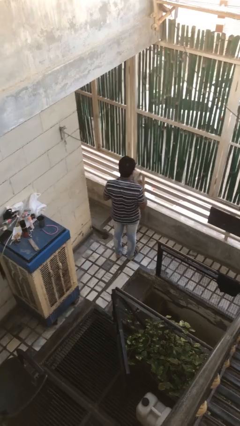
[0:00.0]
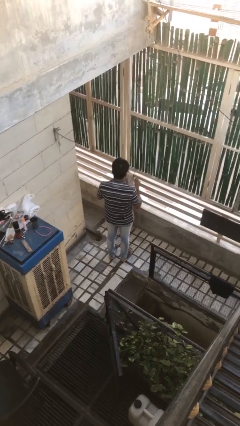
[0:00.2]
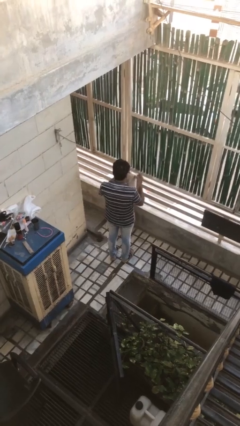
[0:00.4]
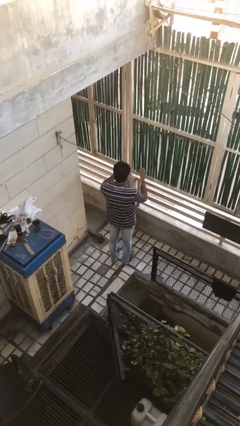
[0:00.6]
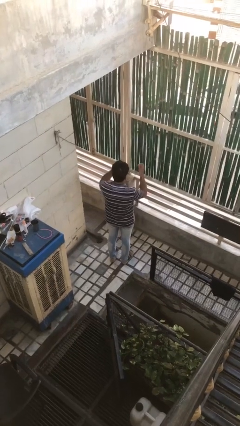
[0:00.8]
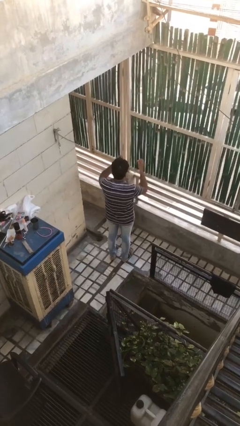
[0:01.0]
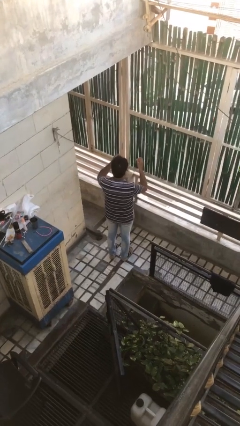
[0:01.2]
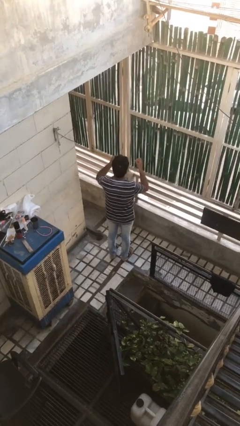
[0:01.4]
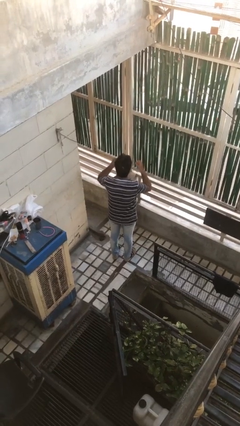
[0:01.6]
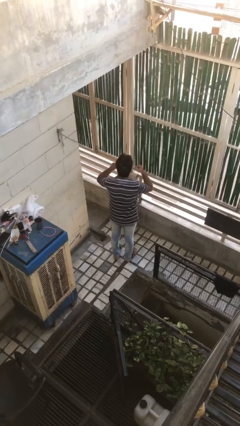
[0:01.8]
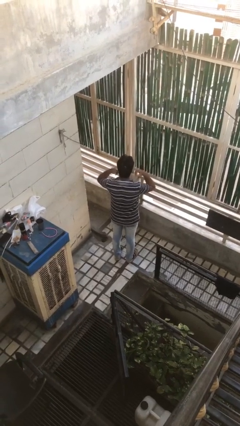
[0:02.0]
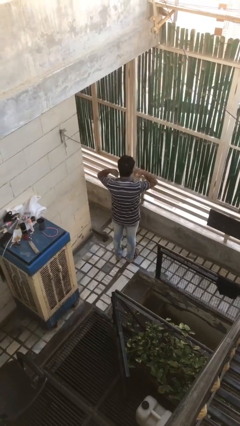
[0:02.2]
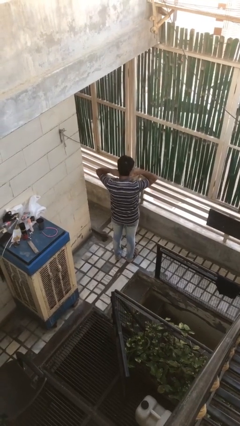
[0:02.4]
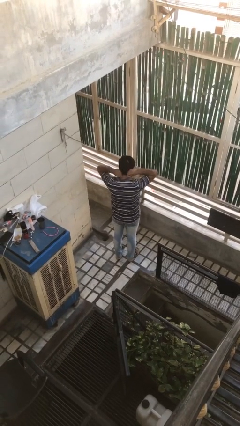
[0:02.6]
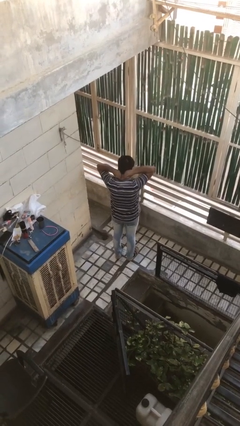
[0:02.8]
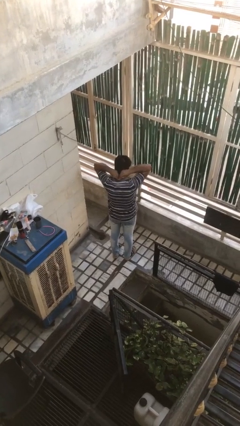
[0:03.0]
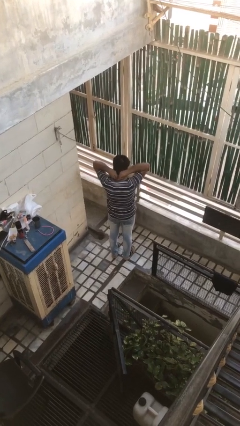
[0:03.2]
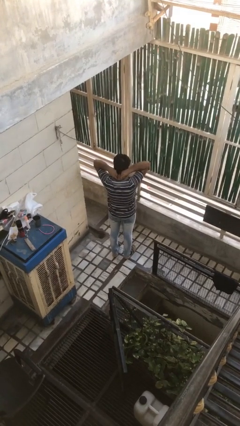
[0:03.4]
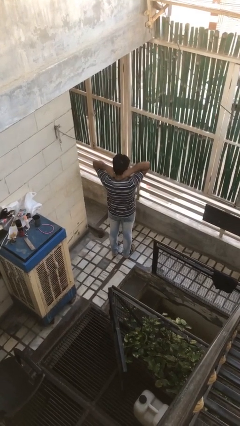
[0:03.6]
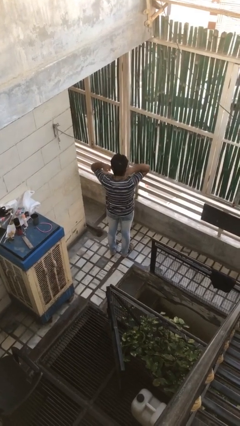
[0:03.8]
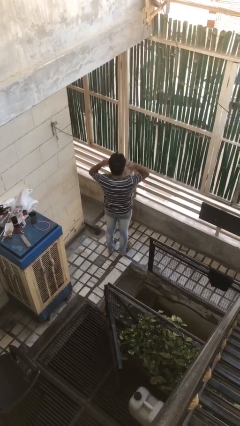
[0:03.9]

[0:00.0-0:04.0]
person puts on necklace

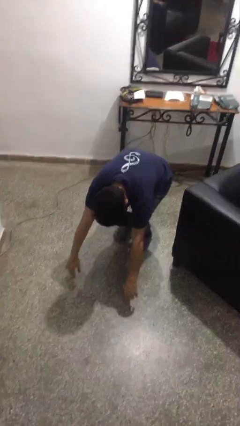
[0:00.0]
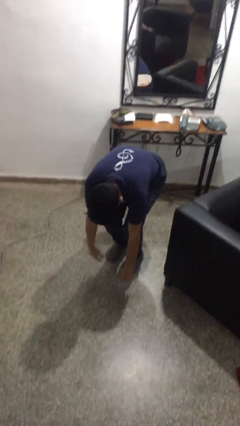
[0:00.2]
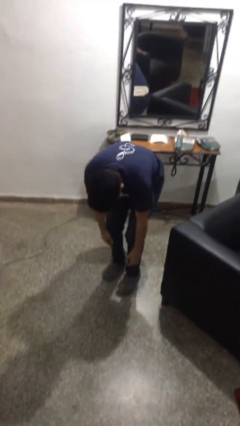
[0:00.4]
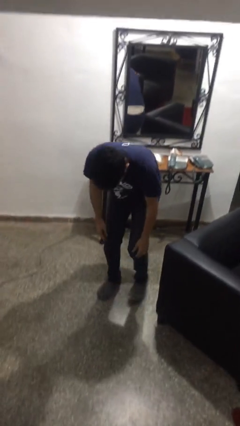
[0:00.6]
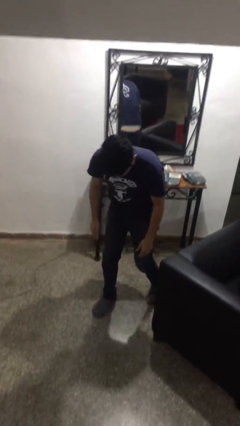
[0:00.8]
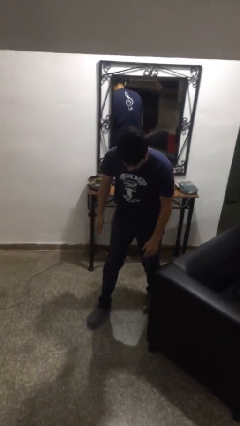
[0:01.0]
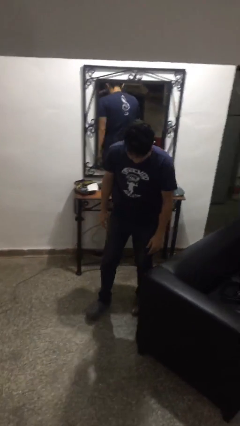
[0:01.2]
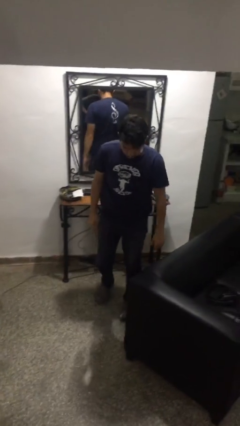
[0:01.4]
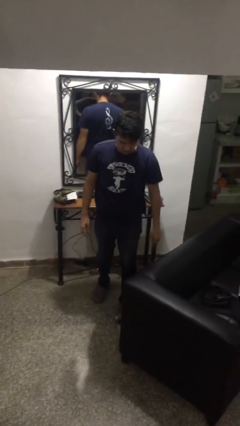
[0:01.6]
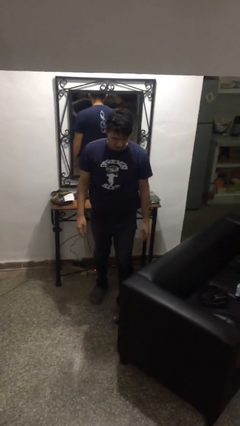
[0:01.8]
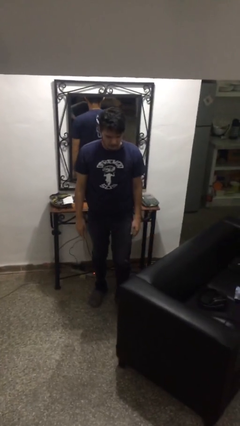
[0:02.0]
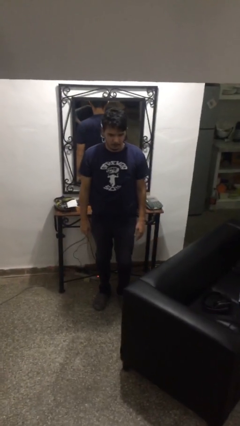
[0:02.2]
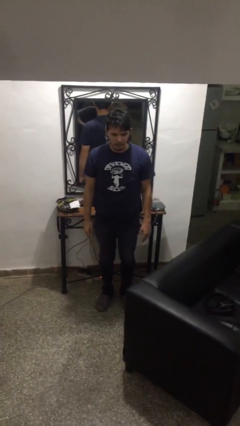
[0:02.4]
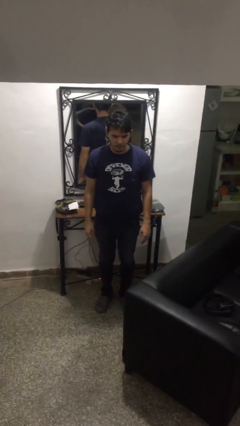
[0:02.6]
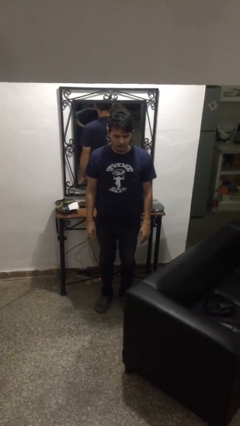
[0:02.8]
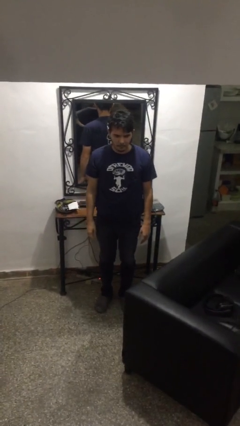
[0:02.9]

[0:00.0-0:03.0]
person stands up from floor

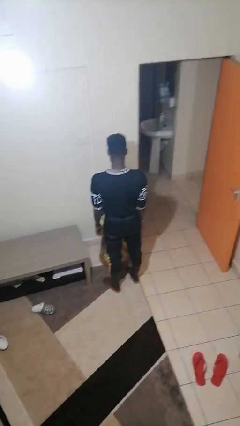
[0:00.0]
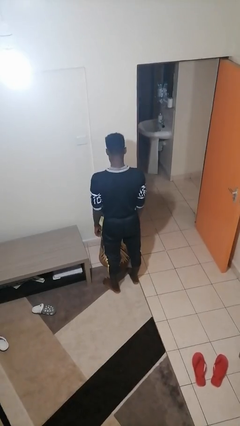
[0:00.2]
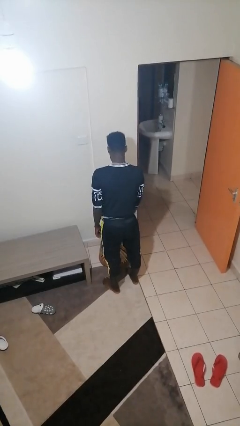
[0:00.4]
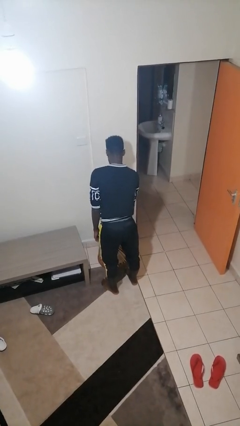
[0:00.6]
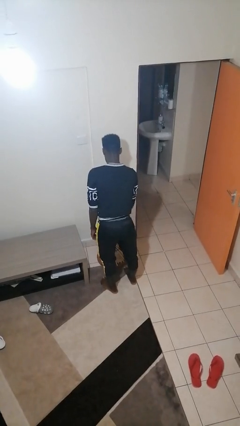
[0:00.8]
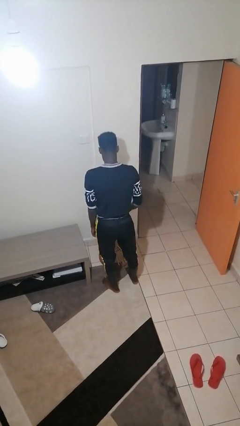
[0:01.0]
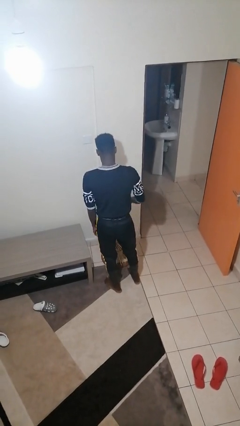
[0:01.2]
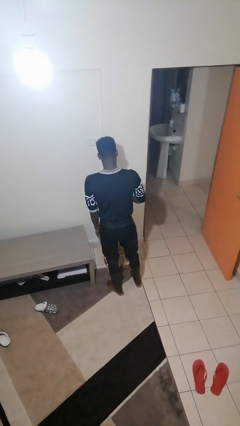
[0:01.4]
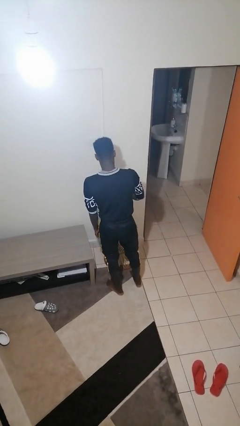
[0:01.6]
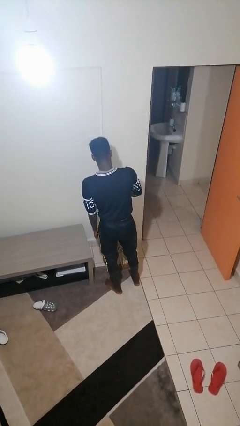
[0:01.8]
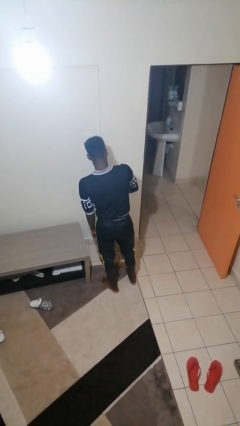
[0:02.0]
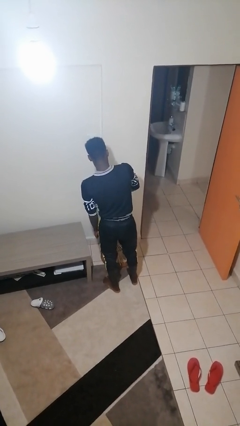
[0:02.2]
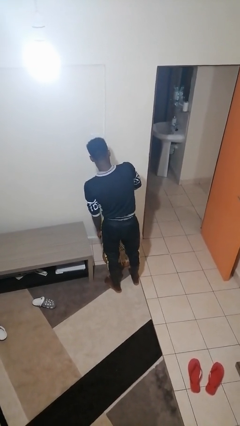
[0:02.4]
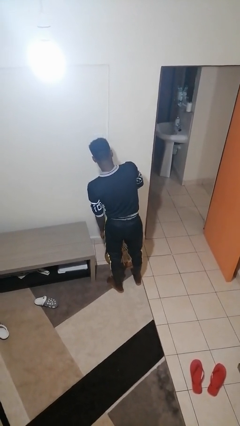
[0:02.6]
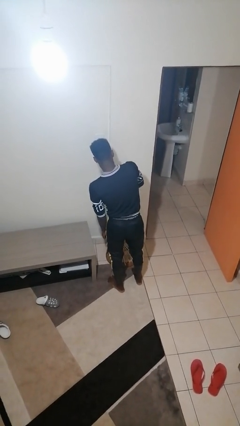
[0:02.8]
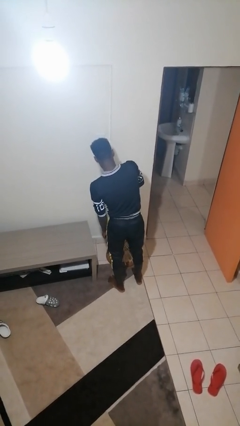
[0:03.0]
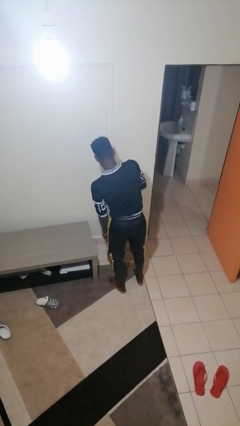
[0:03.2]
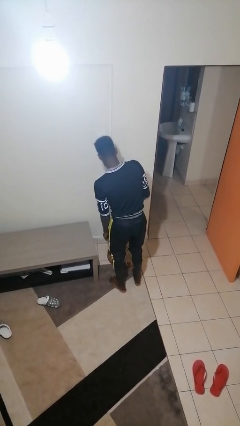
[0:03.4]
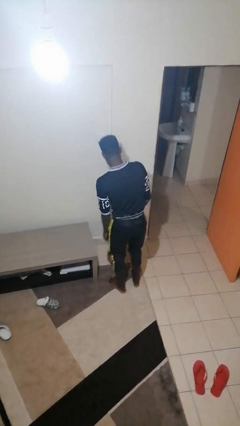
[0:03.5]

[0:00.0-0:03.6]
person waters houseplant

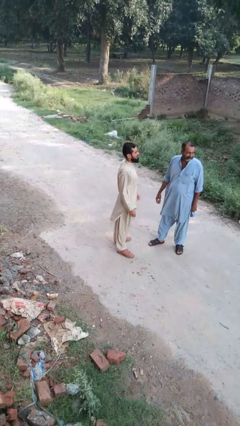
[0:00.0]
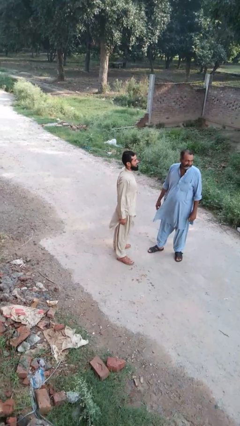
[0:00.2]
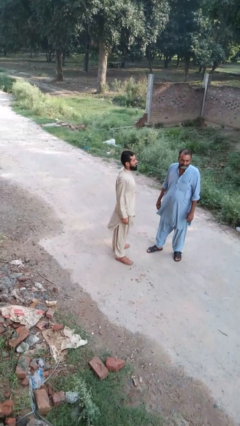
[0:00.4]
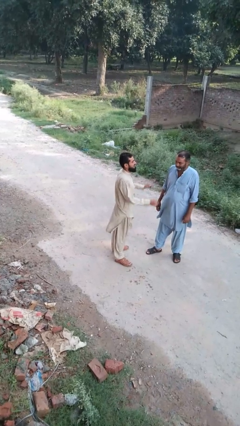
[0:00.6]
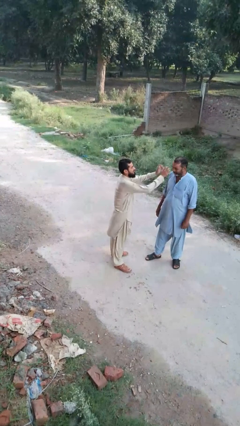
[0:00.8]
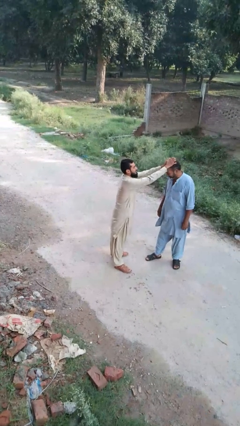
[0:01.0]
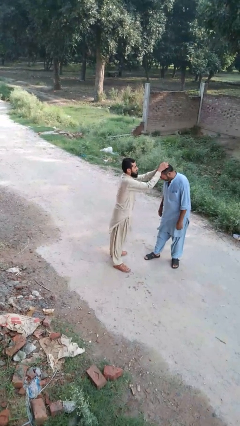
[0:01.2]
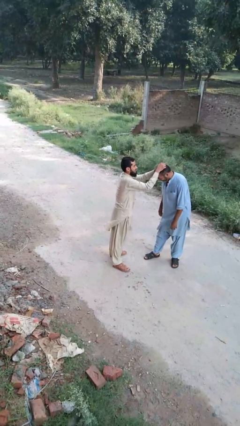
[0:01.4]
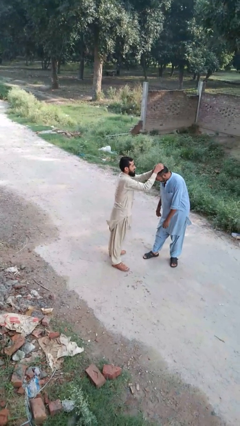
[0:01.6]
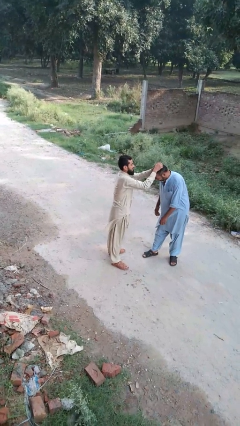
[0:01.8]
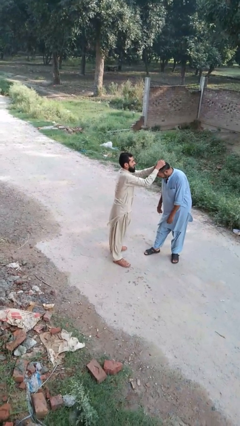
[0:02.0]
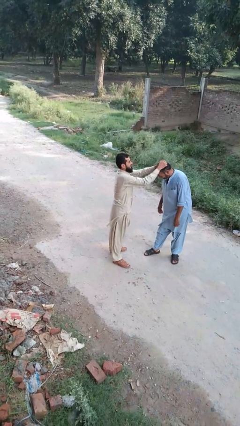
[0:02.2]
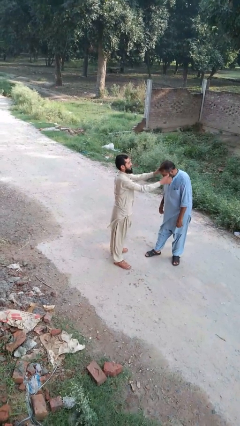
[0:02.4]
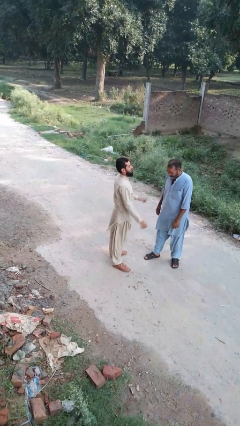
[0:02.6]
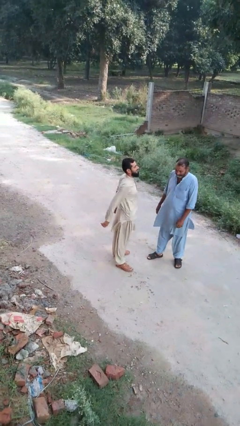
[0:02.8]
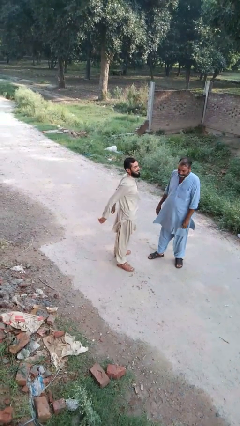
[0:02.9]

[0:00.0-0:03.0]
person grabs person by hair

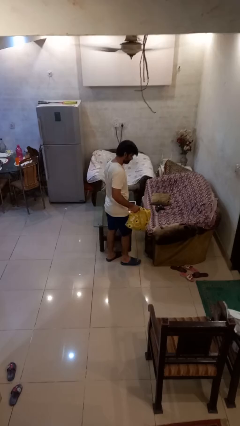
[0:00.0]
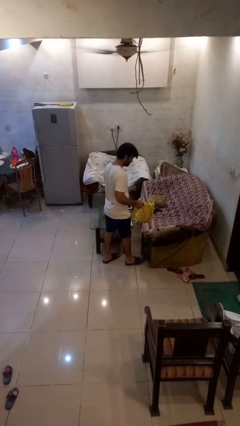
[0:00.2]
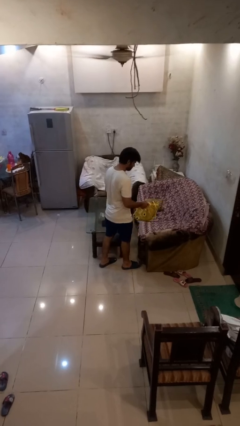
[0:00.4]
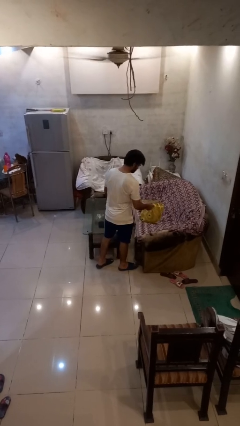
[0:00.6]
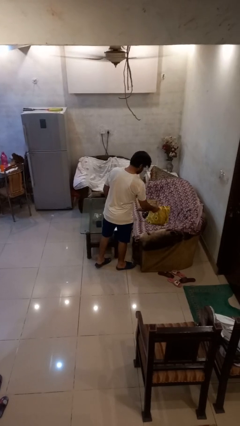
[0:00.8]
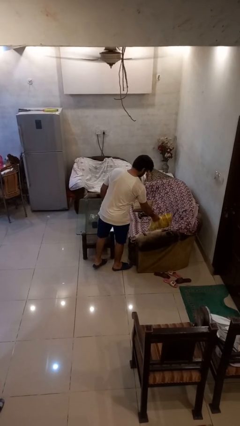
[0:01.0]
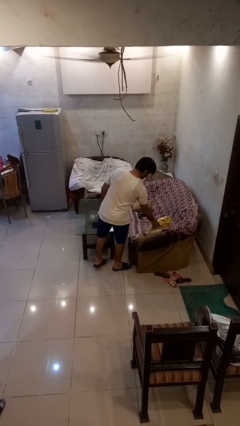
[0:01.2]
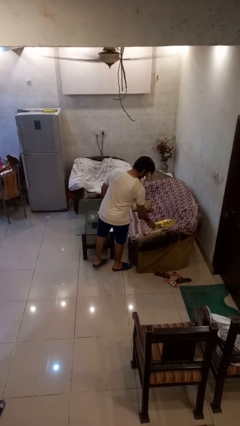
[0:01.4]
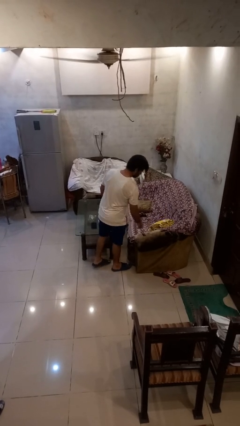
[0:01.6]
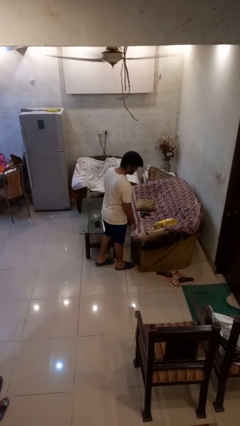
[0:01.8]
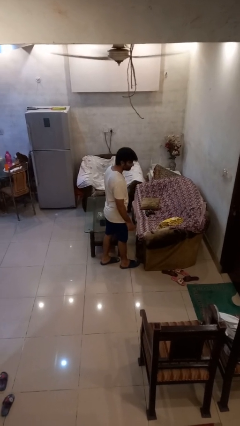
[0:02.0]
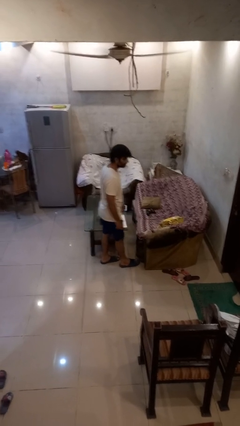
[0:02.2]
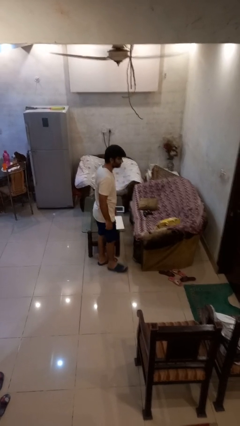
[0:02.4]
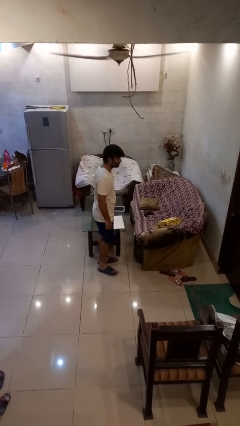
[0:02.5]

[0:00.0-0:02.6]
person puts down object on couch

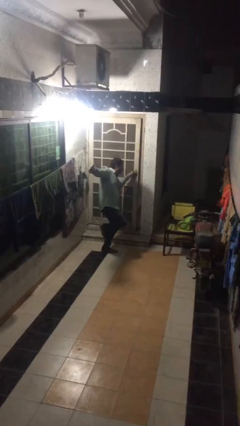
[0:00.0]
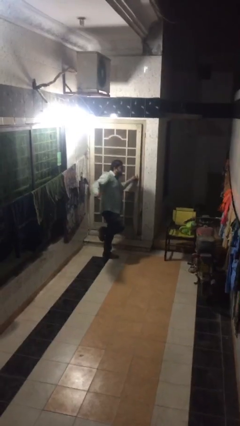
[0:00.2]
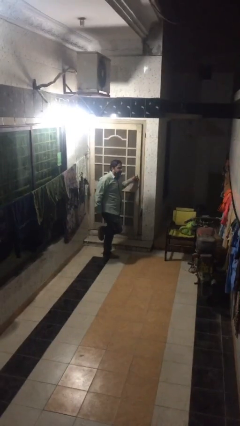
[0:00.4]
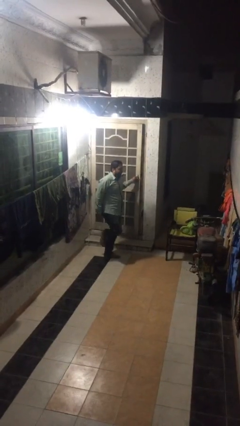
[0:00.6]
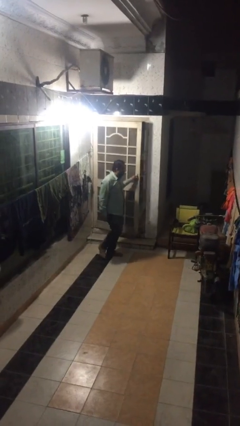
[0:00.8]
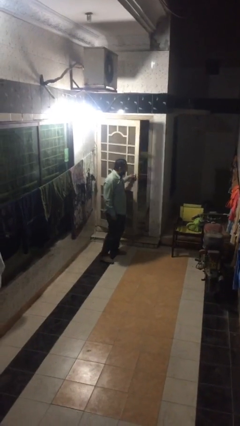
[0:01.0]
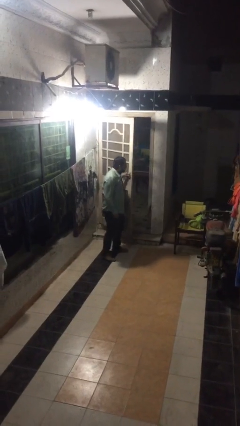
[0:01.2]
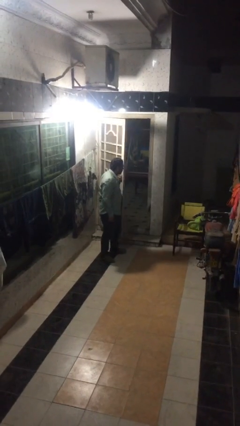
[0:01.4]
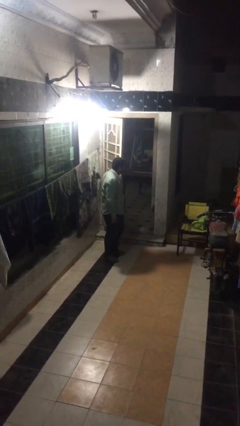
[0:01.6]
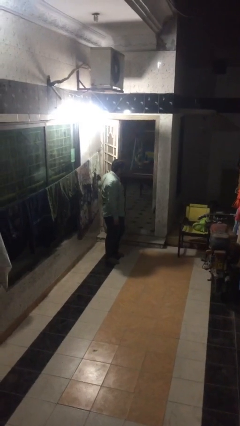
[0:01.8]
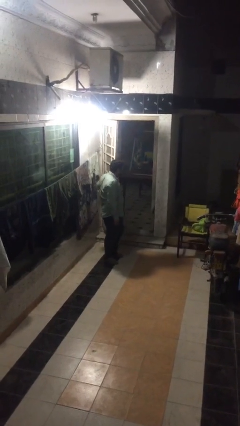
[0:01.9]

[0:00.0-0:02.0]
person opens facility door
